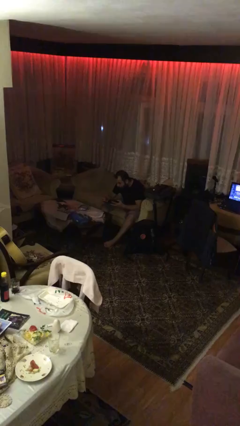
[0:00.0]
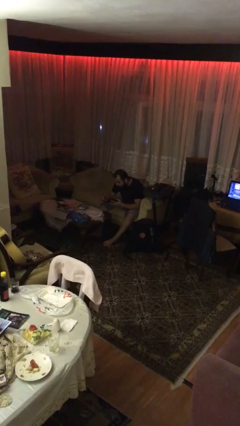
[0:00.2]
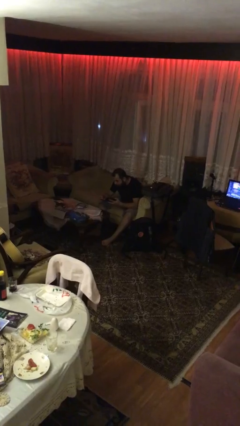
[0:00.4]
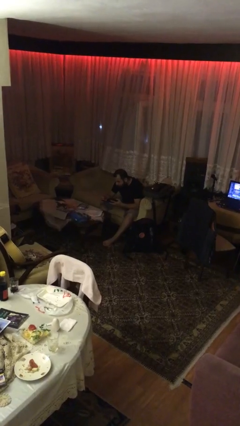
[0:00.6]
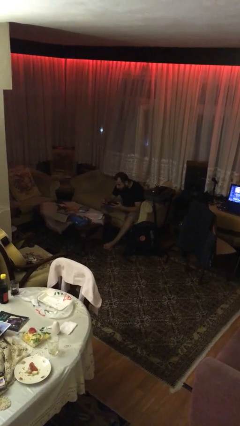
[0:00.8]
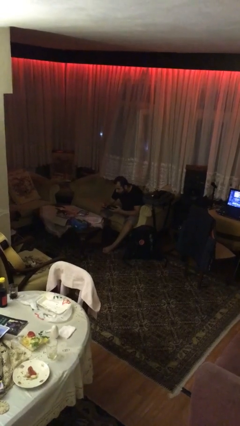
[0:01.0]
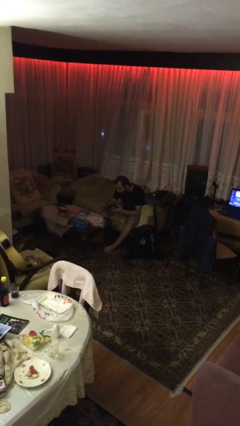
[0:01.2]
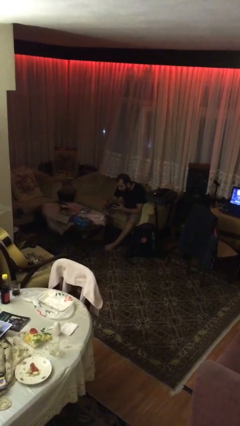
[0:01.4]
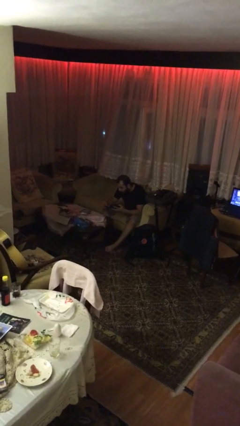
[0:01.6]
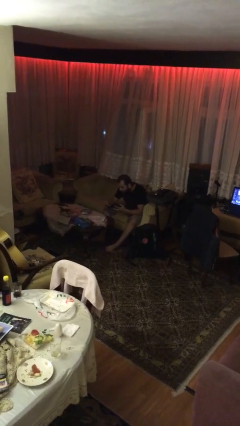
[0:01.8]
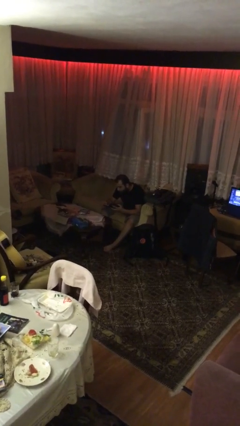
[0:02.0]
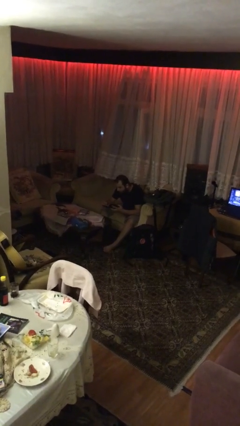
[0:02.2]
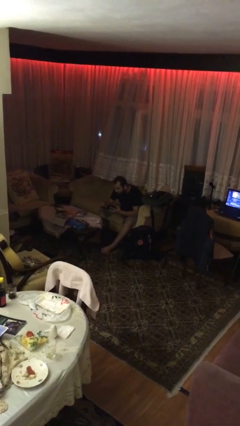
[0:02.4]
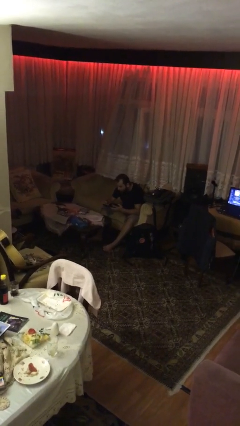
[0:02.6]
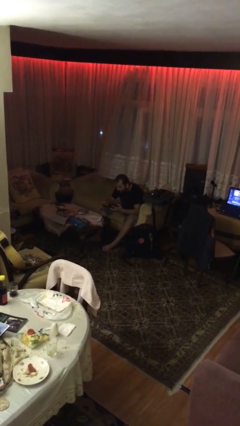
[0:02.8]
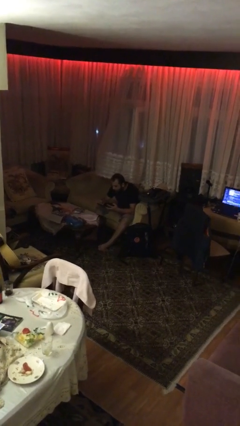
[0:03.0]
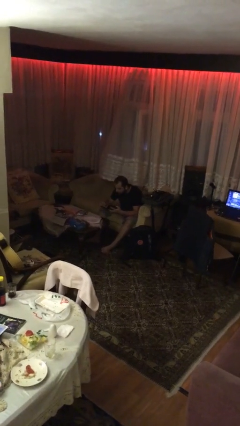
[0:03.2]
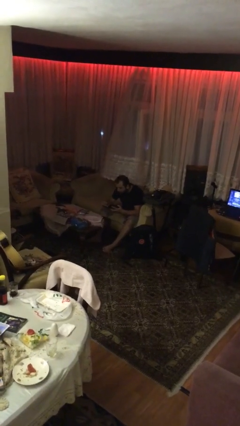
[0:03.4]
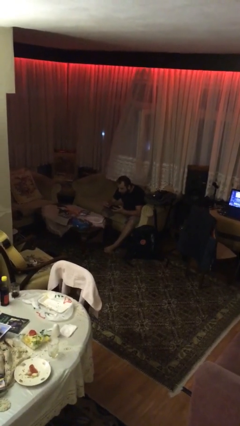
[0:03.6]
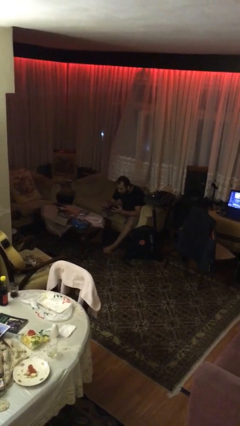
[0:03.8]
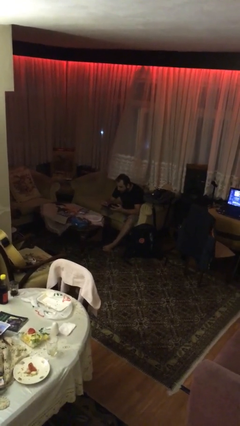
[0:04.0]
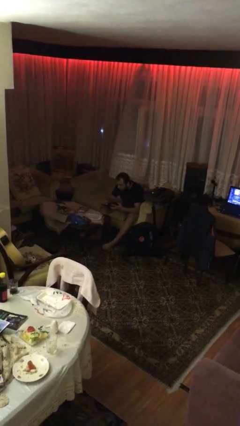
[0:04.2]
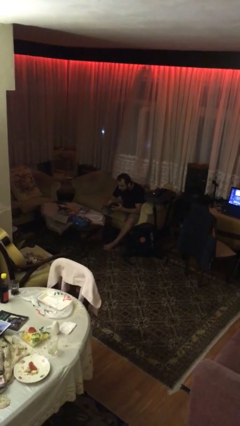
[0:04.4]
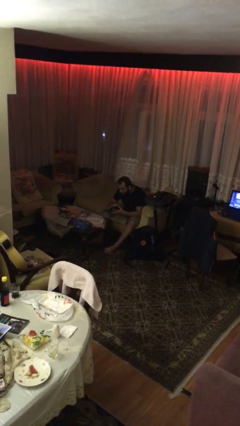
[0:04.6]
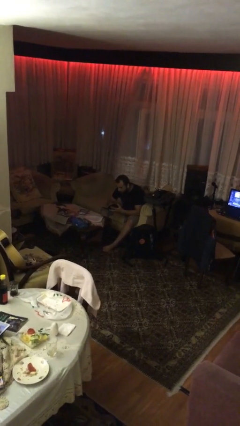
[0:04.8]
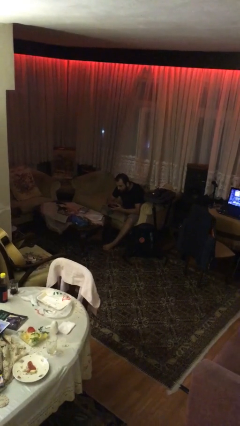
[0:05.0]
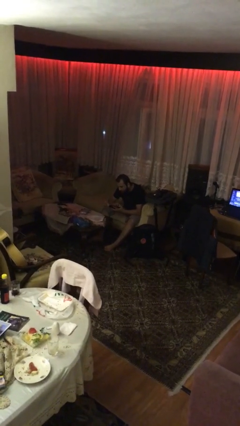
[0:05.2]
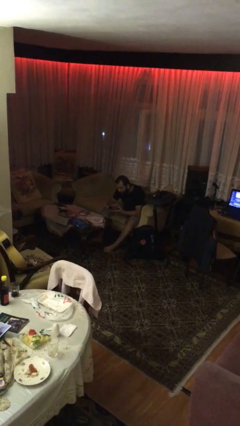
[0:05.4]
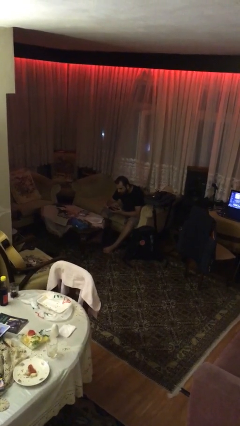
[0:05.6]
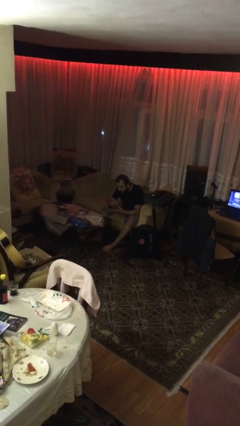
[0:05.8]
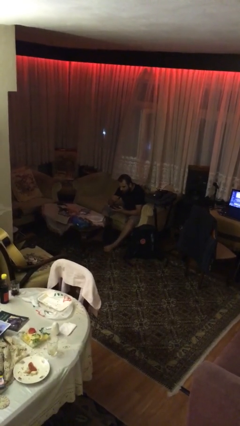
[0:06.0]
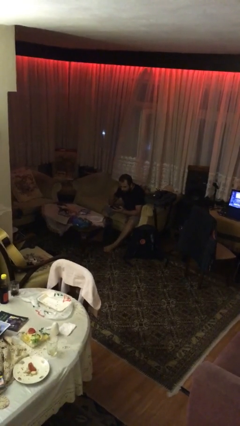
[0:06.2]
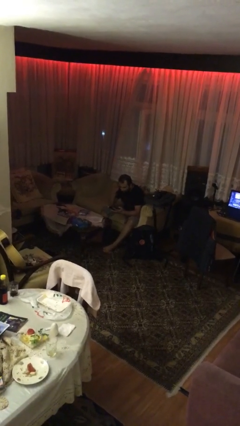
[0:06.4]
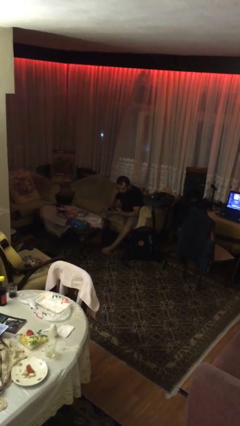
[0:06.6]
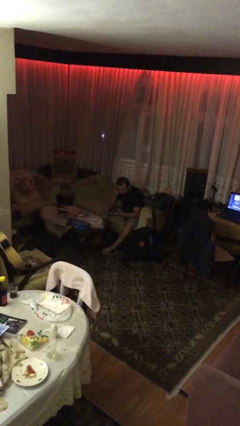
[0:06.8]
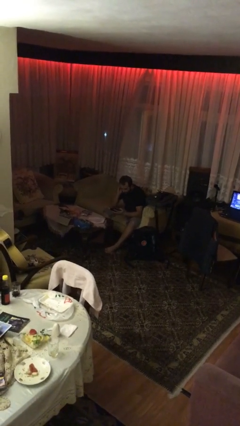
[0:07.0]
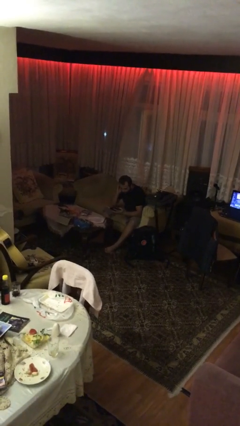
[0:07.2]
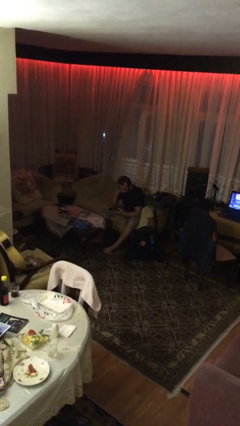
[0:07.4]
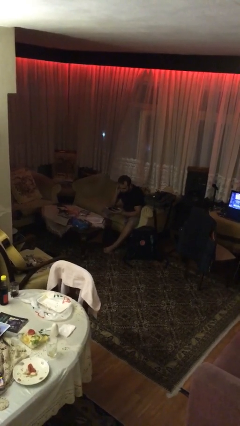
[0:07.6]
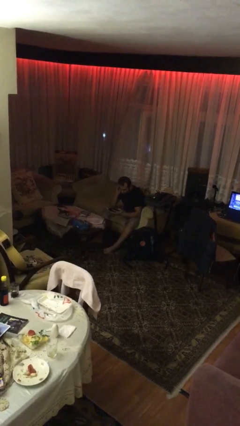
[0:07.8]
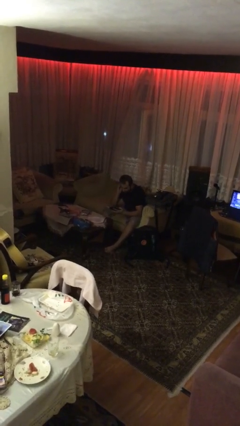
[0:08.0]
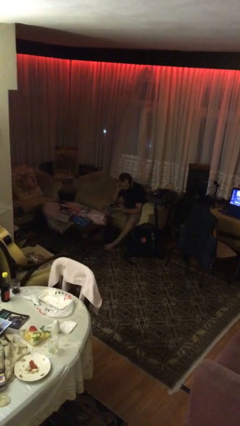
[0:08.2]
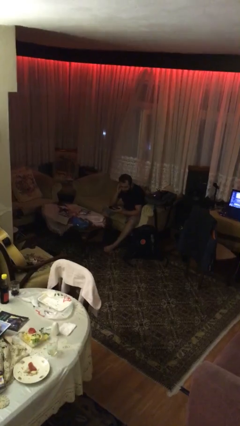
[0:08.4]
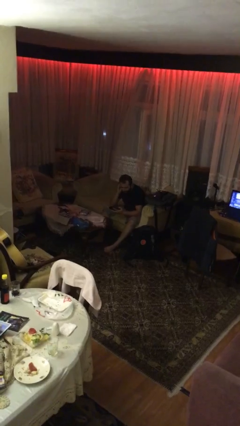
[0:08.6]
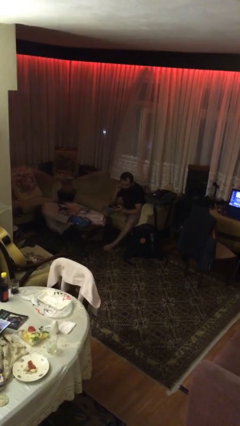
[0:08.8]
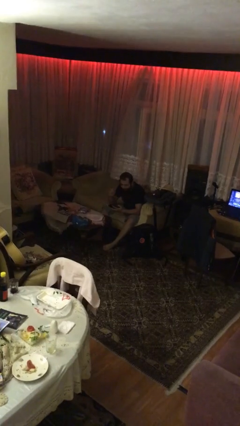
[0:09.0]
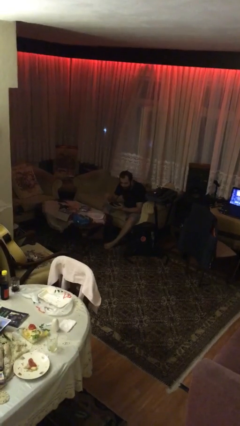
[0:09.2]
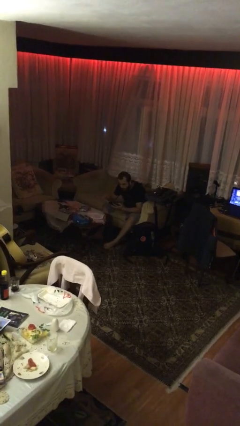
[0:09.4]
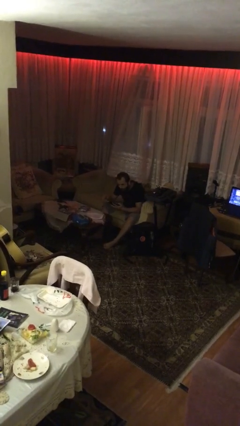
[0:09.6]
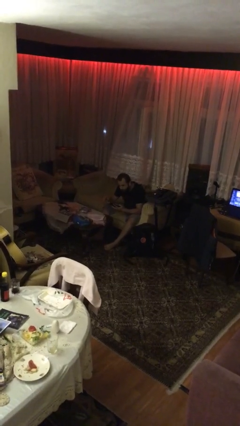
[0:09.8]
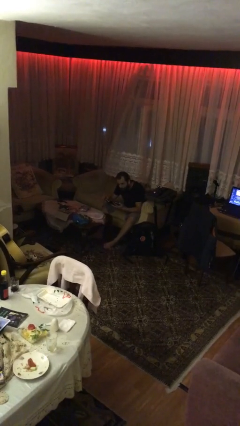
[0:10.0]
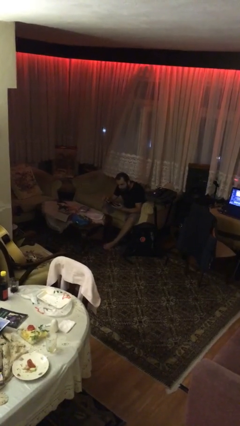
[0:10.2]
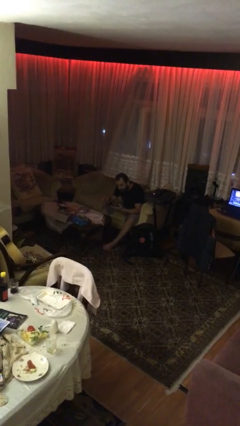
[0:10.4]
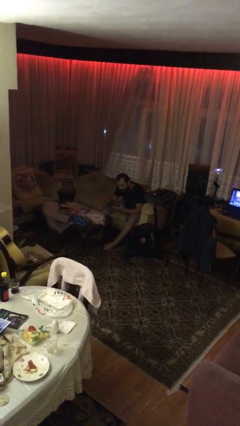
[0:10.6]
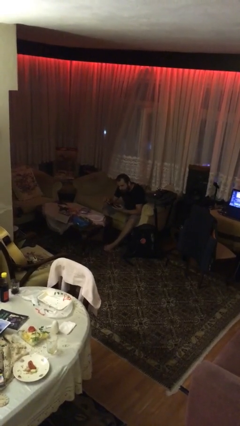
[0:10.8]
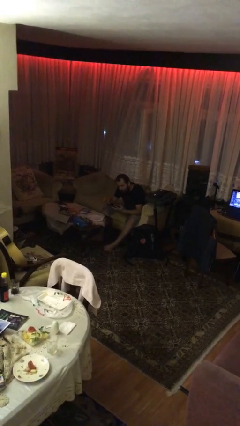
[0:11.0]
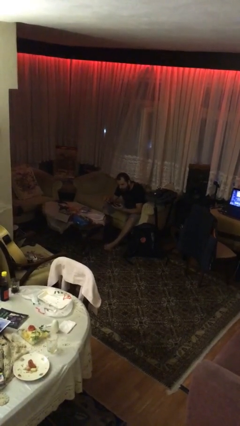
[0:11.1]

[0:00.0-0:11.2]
person reads document

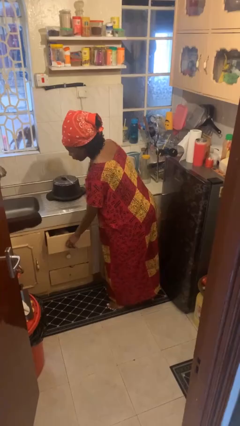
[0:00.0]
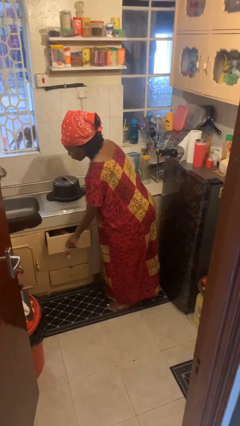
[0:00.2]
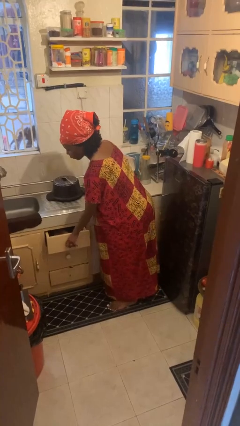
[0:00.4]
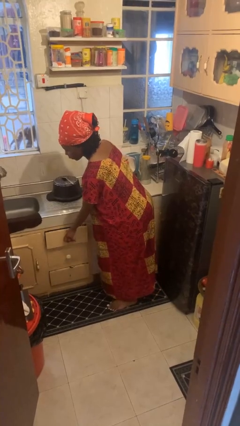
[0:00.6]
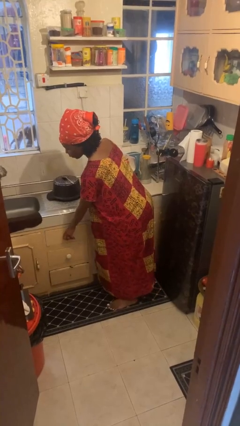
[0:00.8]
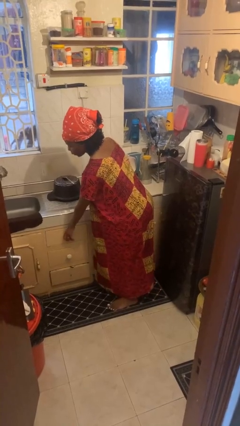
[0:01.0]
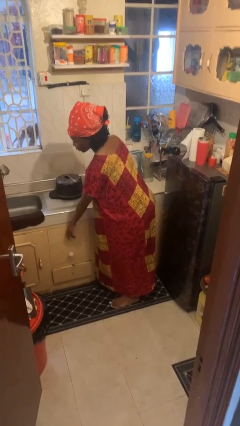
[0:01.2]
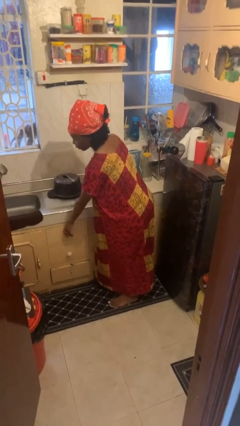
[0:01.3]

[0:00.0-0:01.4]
person closes kitchen drawer

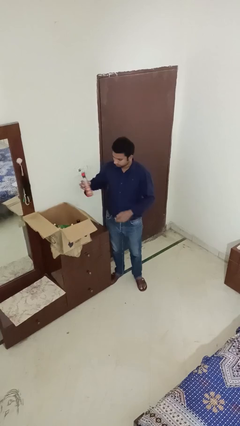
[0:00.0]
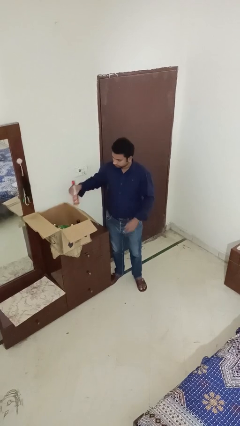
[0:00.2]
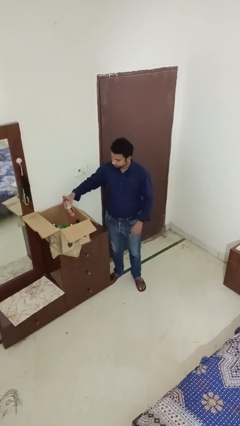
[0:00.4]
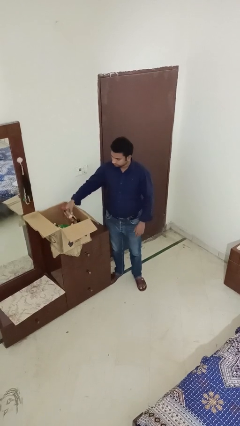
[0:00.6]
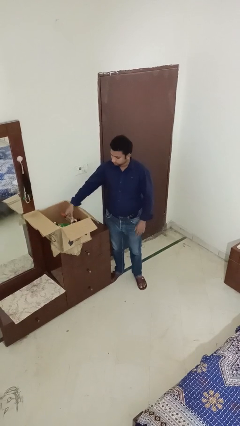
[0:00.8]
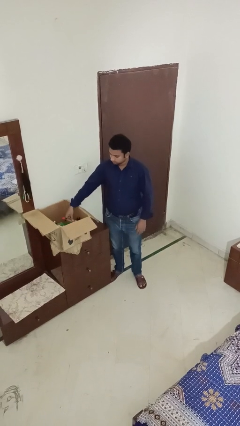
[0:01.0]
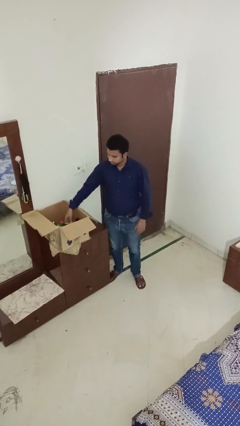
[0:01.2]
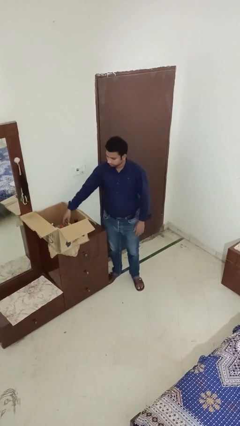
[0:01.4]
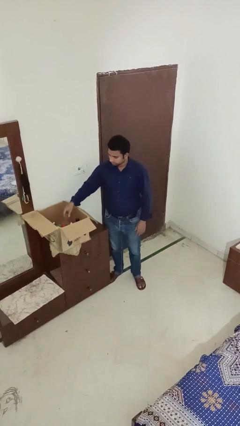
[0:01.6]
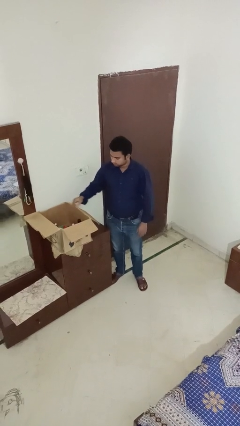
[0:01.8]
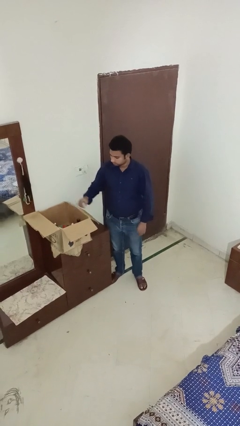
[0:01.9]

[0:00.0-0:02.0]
person puts object into box

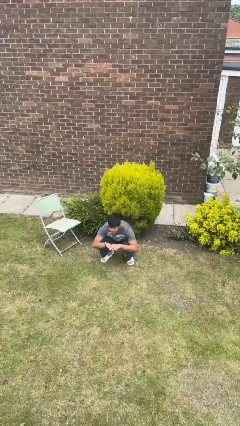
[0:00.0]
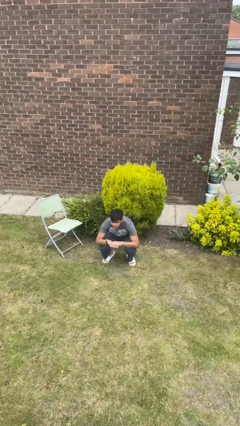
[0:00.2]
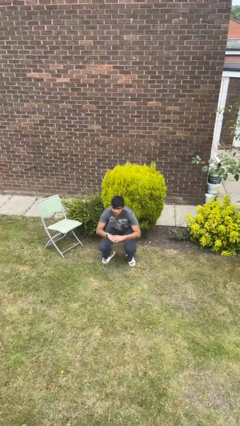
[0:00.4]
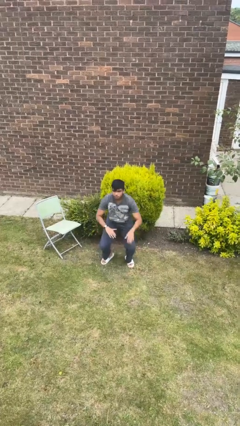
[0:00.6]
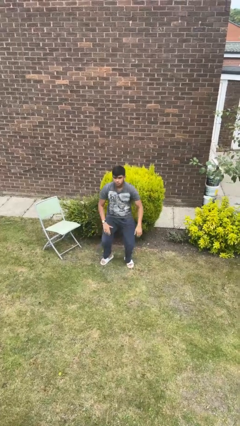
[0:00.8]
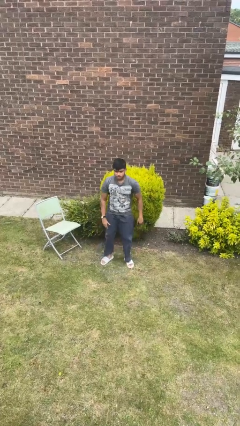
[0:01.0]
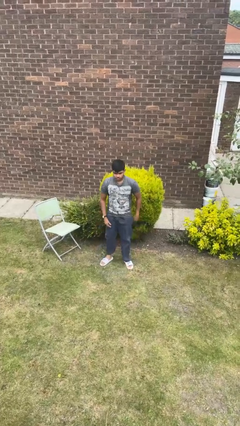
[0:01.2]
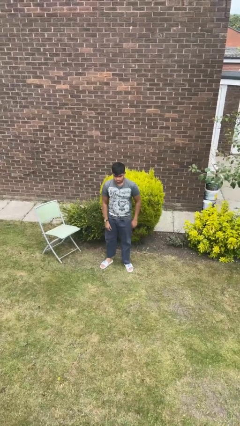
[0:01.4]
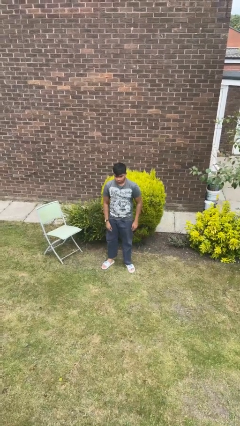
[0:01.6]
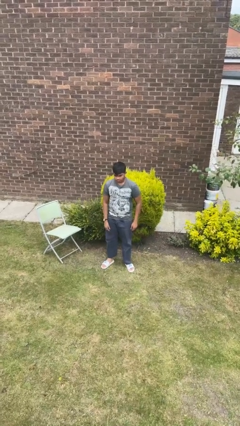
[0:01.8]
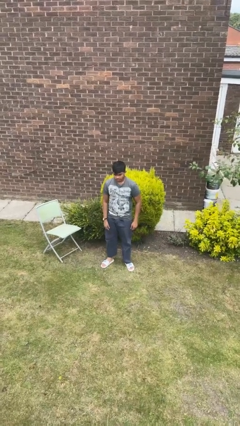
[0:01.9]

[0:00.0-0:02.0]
person stands up

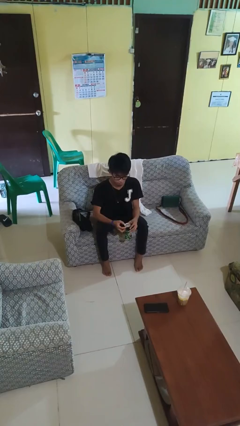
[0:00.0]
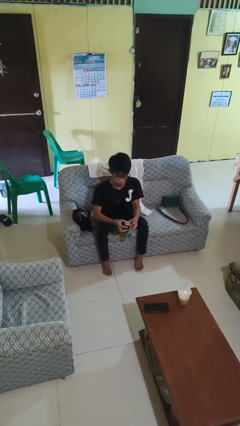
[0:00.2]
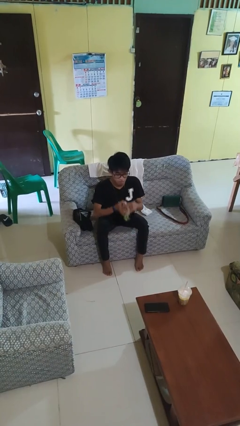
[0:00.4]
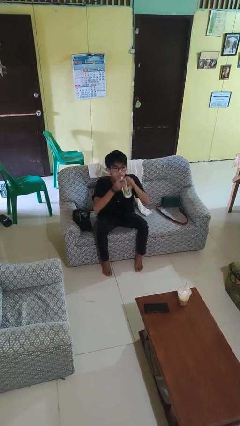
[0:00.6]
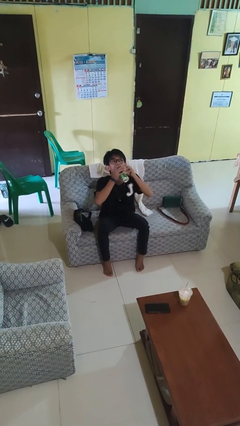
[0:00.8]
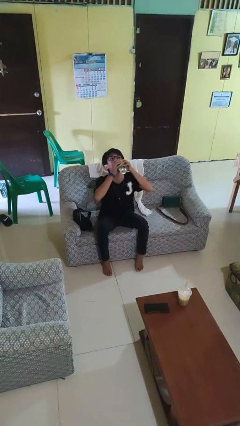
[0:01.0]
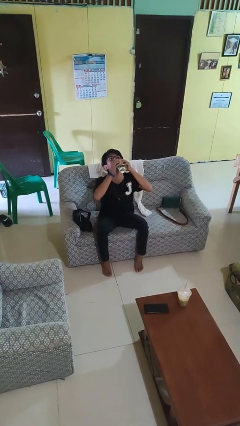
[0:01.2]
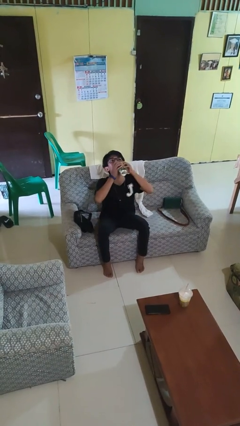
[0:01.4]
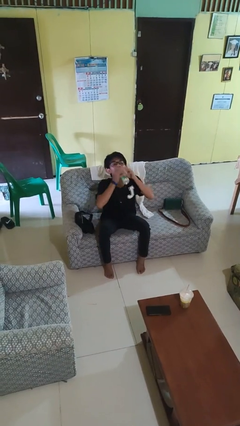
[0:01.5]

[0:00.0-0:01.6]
person drinks from beverage can
